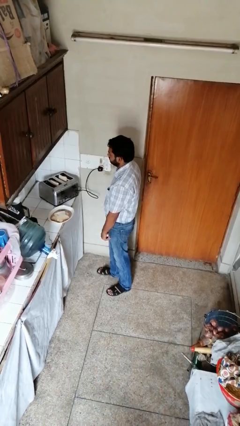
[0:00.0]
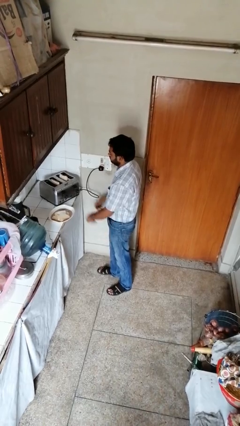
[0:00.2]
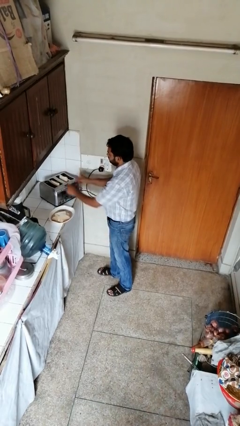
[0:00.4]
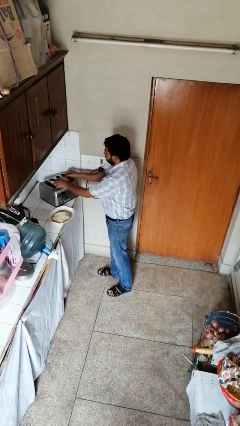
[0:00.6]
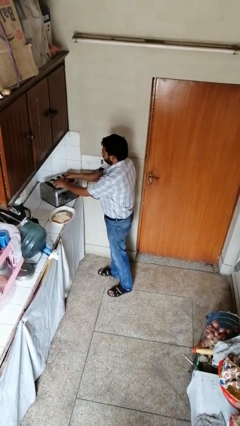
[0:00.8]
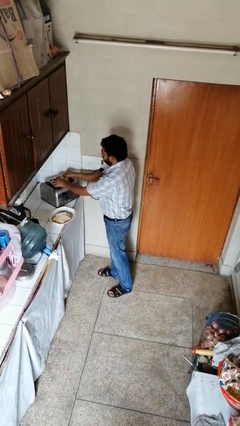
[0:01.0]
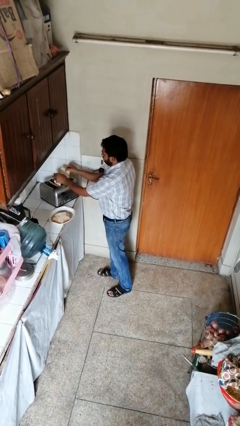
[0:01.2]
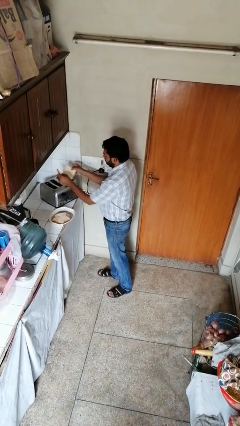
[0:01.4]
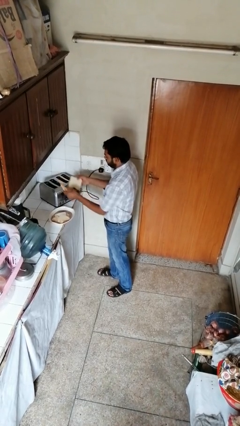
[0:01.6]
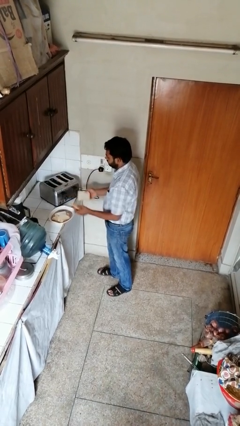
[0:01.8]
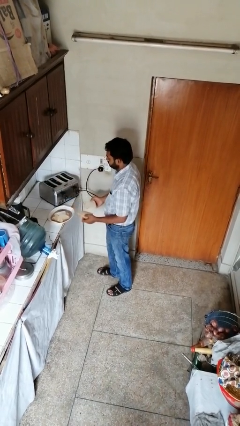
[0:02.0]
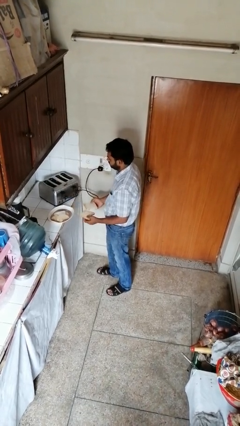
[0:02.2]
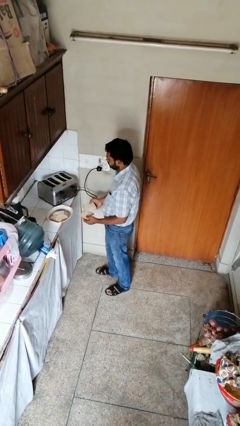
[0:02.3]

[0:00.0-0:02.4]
person takes object from toaster

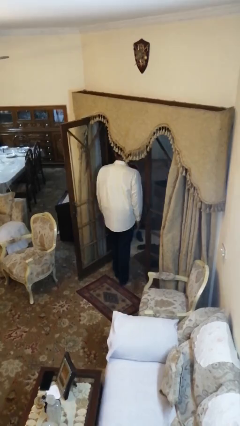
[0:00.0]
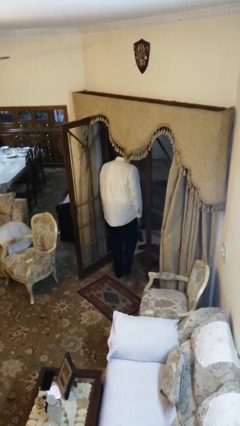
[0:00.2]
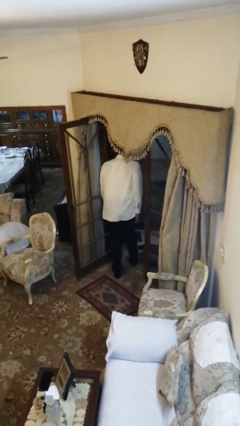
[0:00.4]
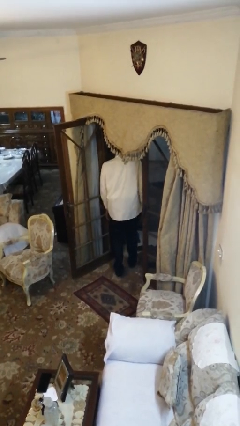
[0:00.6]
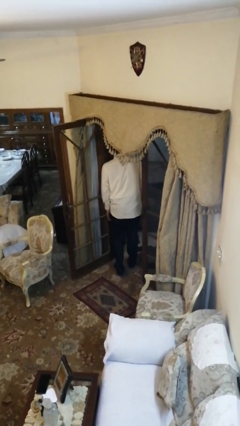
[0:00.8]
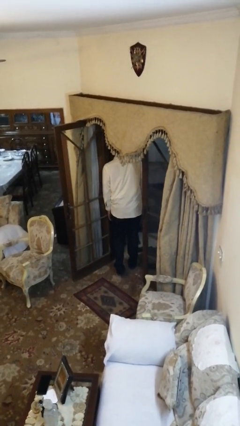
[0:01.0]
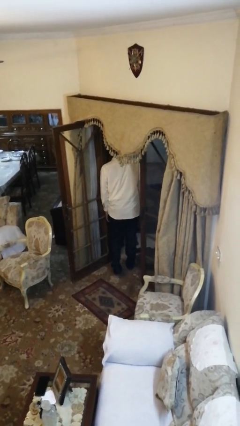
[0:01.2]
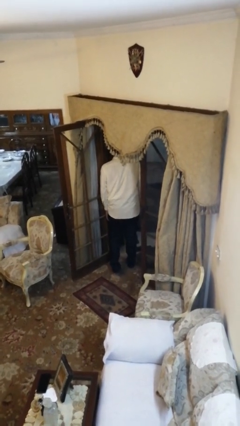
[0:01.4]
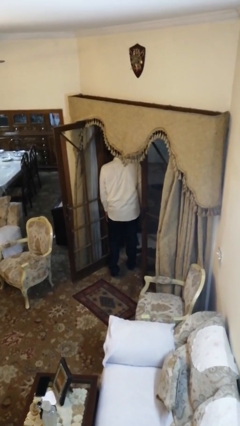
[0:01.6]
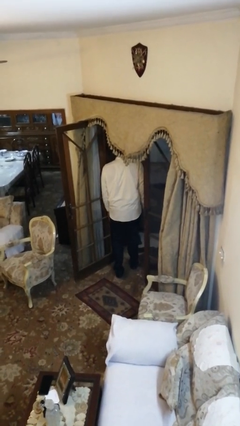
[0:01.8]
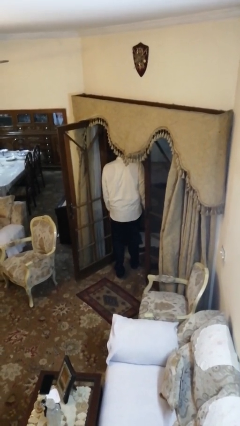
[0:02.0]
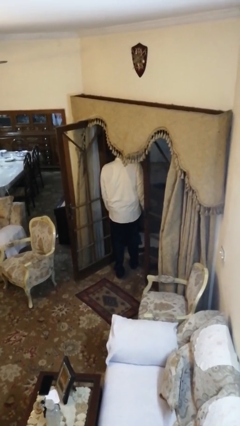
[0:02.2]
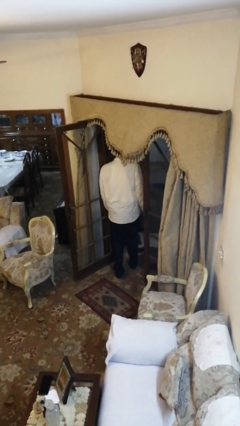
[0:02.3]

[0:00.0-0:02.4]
person bumps into wall

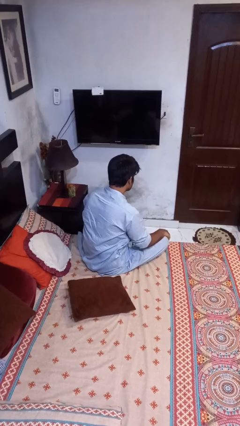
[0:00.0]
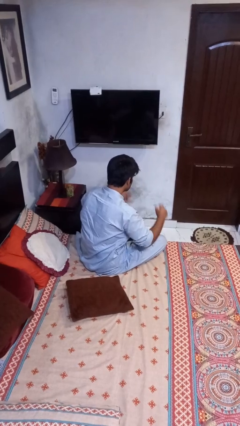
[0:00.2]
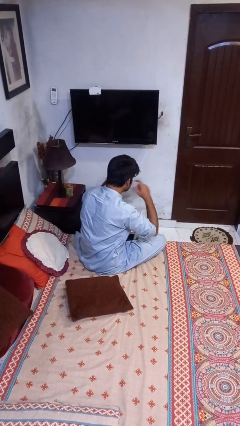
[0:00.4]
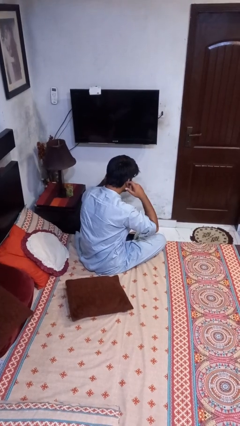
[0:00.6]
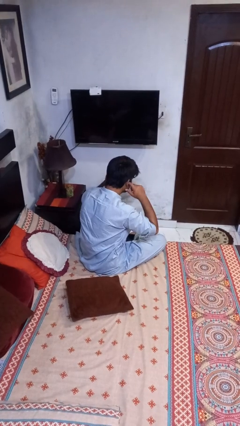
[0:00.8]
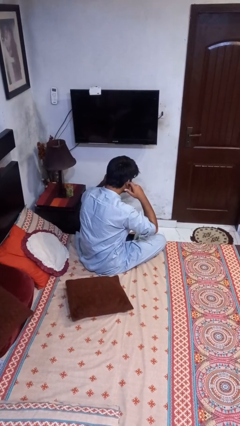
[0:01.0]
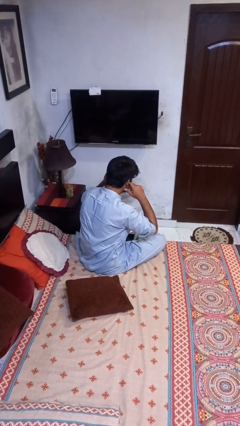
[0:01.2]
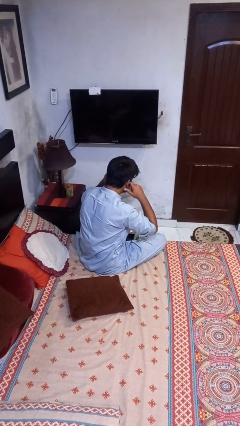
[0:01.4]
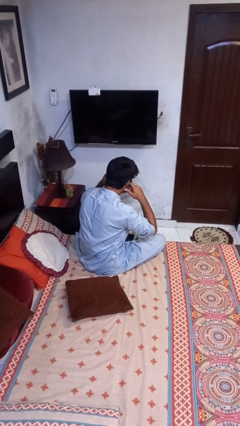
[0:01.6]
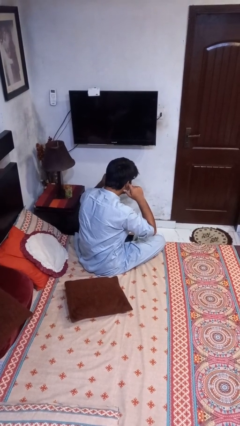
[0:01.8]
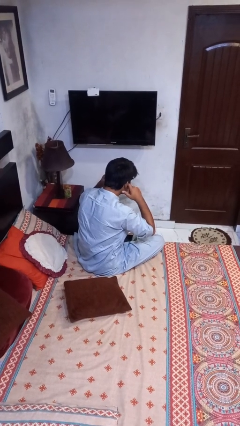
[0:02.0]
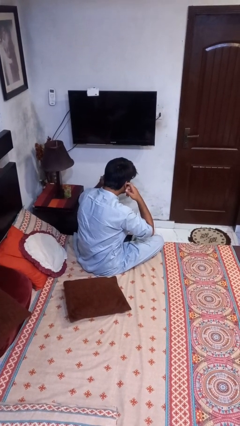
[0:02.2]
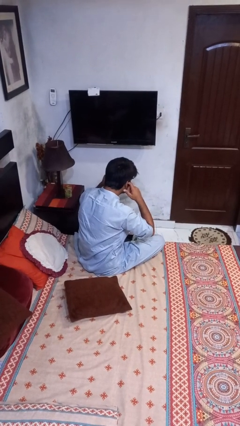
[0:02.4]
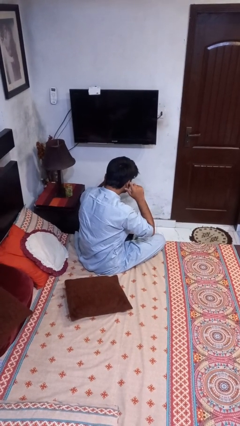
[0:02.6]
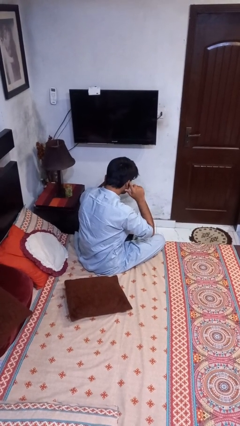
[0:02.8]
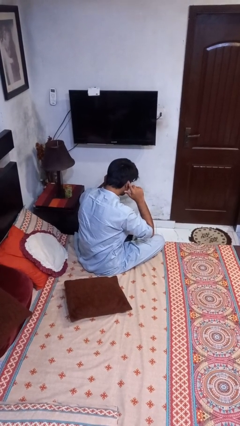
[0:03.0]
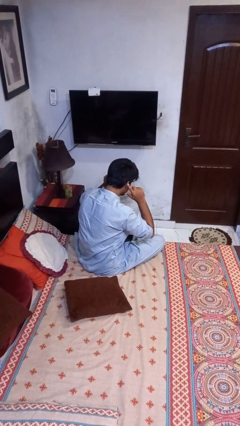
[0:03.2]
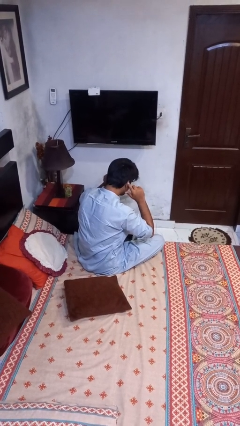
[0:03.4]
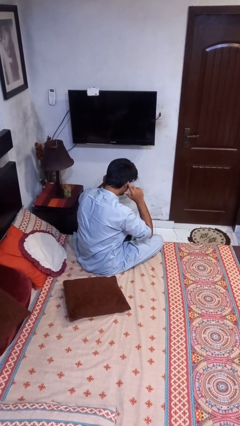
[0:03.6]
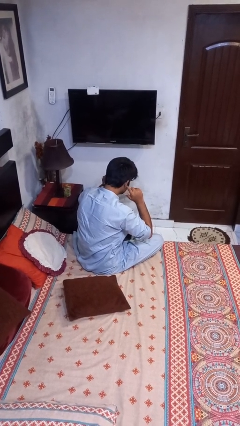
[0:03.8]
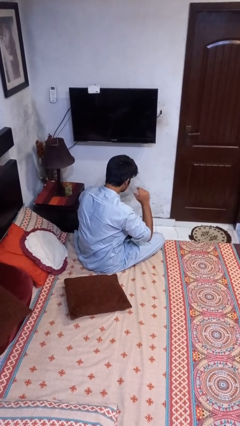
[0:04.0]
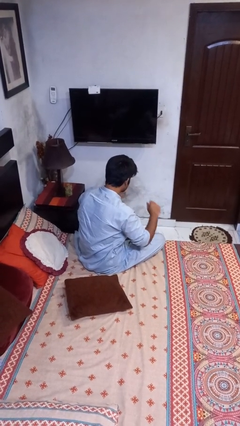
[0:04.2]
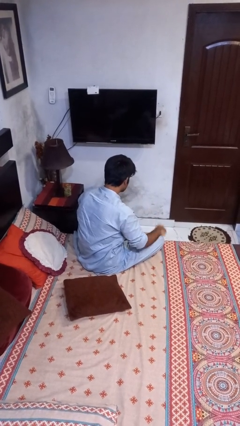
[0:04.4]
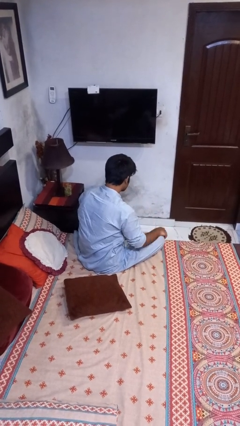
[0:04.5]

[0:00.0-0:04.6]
person puts fingers in ear

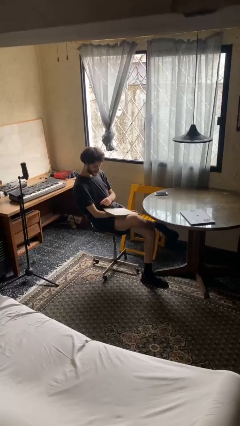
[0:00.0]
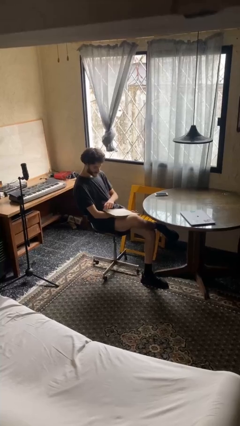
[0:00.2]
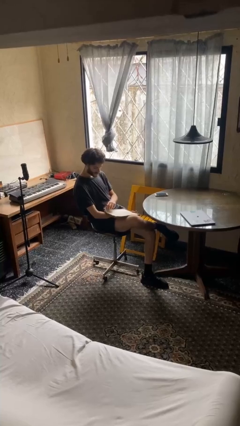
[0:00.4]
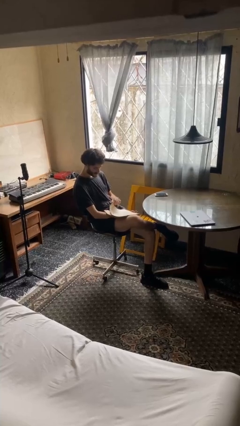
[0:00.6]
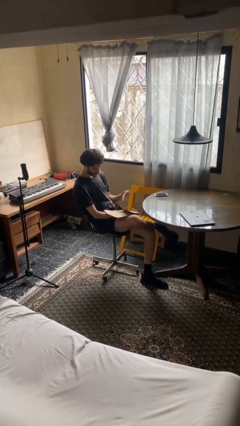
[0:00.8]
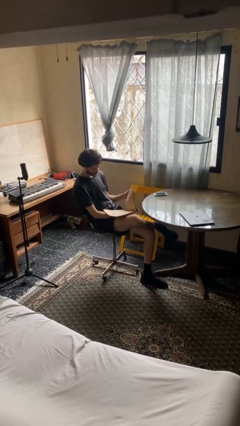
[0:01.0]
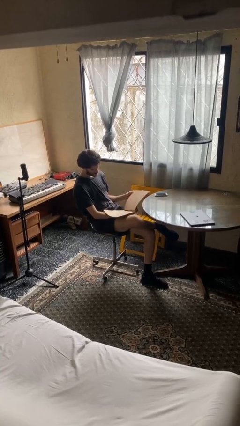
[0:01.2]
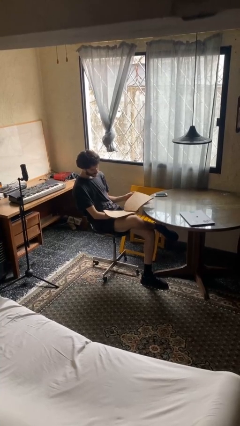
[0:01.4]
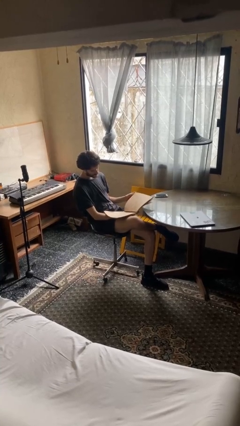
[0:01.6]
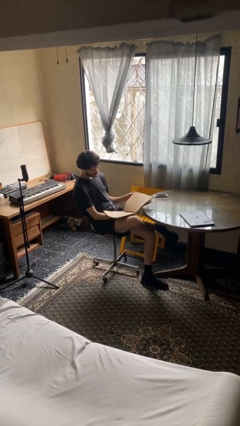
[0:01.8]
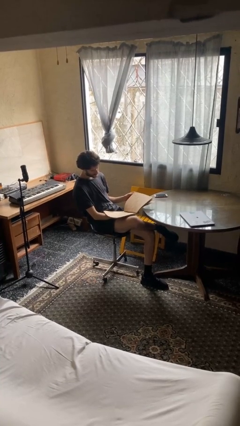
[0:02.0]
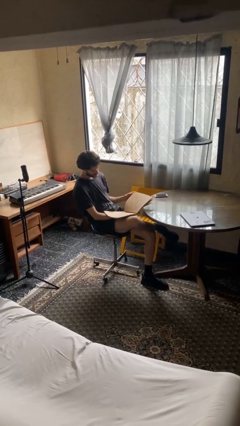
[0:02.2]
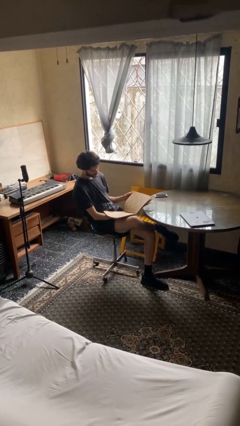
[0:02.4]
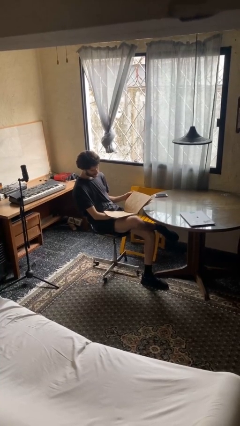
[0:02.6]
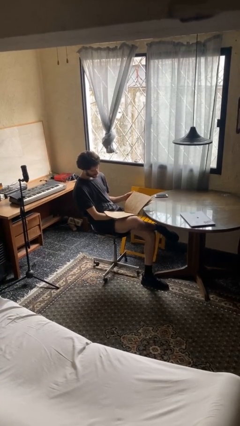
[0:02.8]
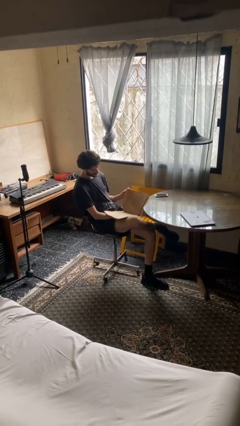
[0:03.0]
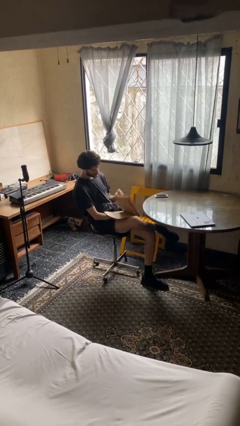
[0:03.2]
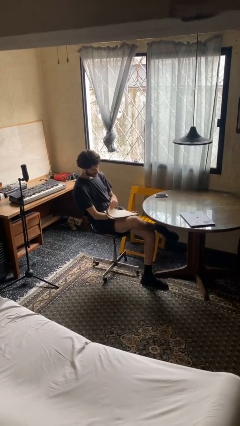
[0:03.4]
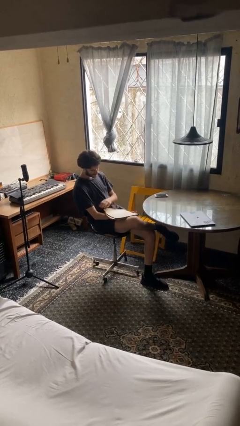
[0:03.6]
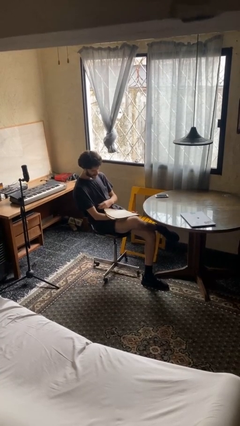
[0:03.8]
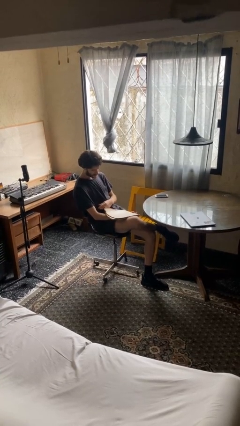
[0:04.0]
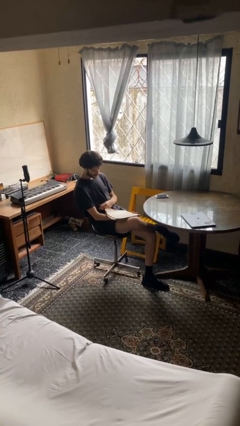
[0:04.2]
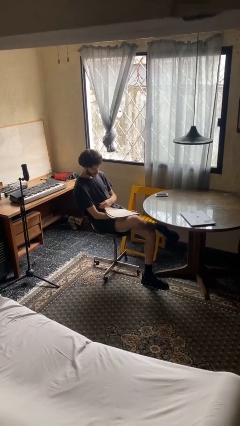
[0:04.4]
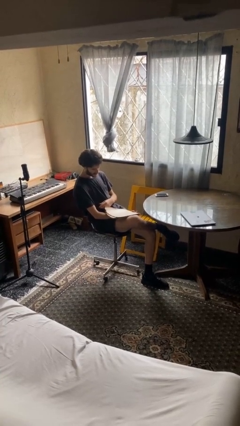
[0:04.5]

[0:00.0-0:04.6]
person reads document

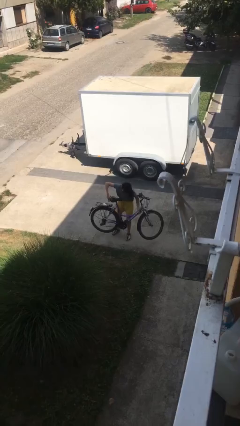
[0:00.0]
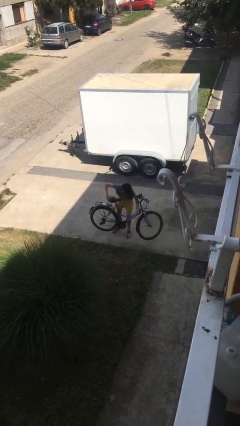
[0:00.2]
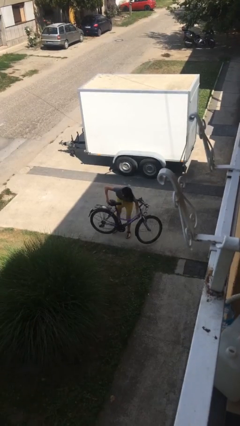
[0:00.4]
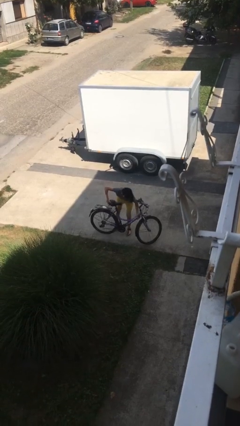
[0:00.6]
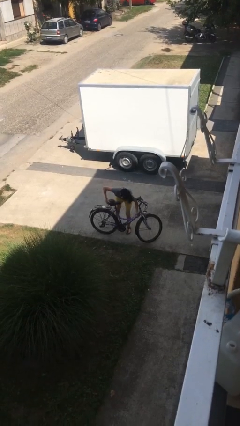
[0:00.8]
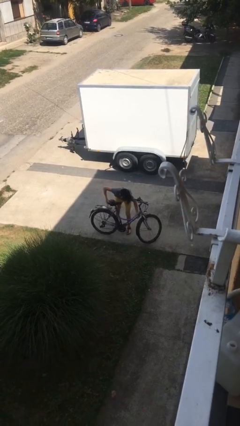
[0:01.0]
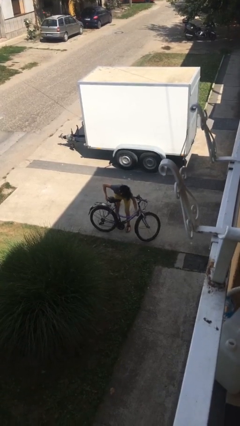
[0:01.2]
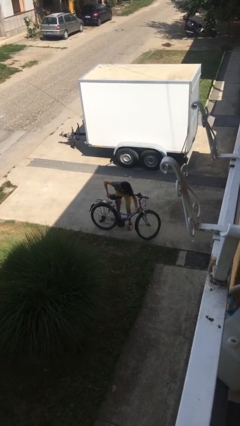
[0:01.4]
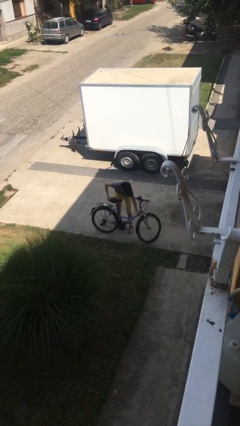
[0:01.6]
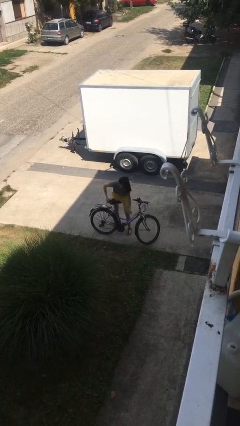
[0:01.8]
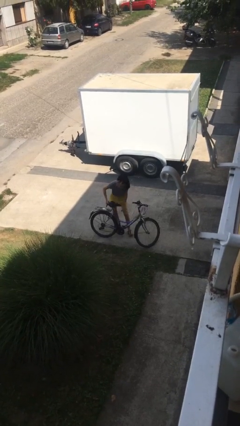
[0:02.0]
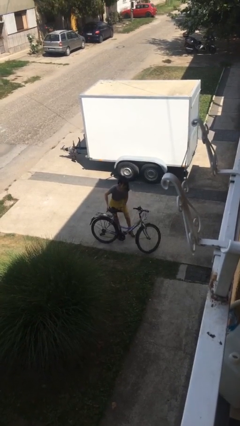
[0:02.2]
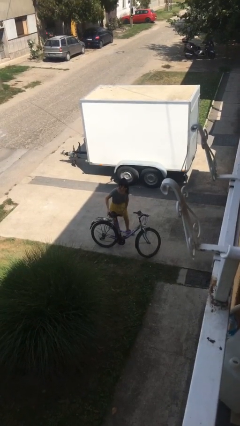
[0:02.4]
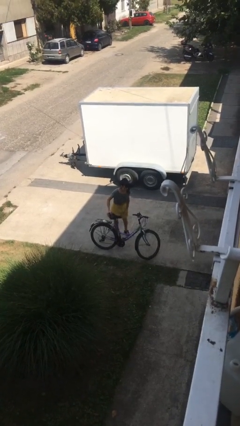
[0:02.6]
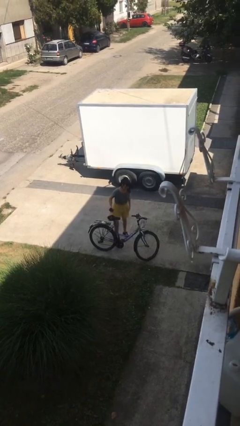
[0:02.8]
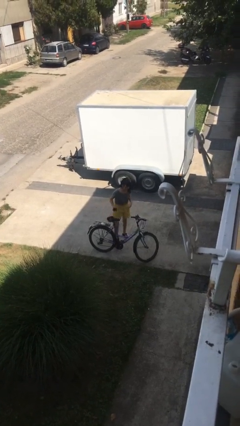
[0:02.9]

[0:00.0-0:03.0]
person puts down object on floor

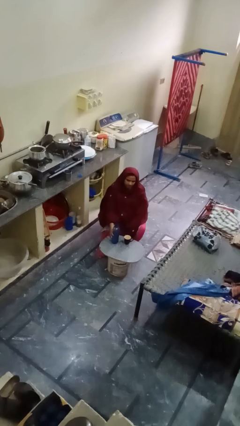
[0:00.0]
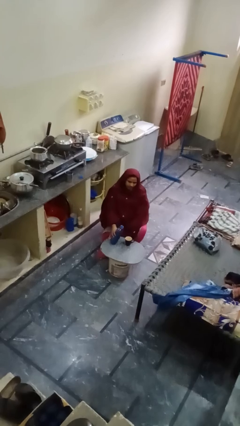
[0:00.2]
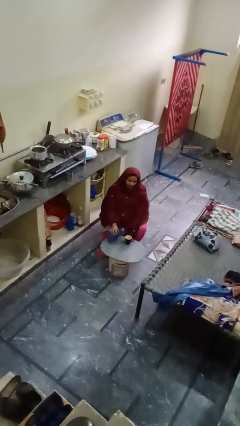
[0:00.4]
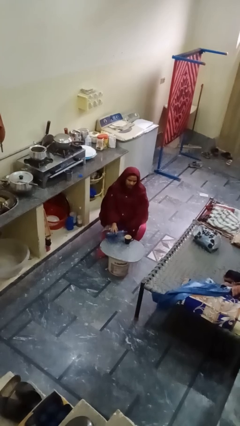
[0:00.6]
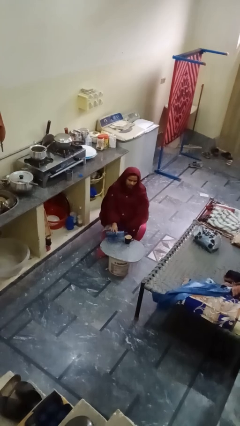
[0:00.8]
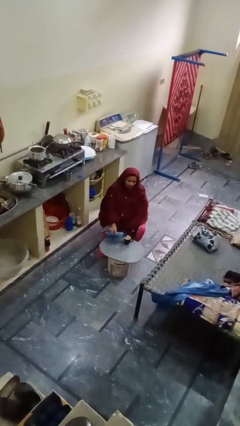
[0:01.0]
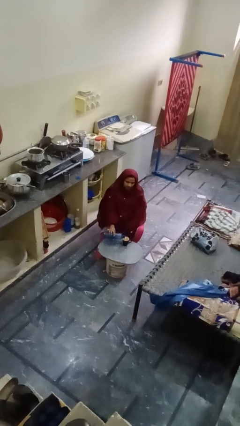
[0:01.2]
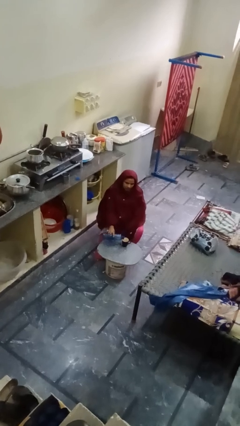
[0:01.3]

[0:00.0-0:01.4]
person pours liquid into cup
